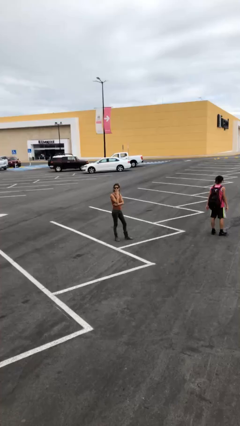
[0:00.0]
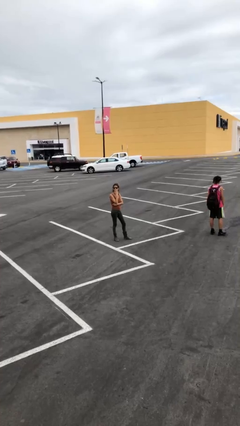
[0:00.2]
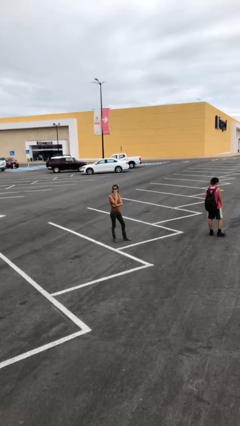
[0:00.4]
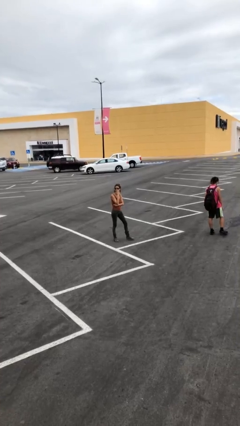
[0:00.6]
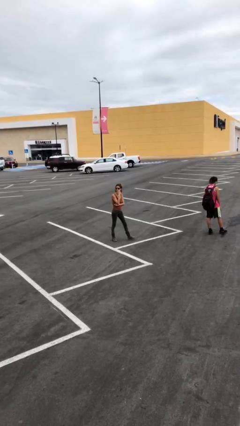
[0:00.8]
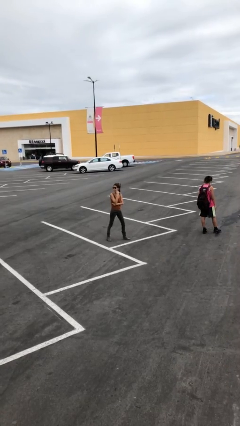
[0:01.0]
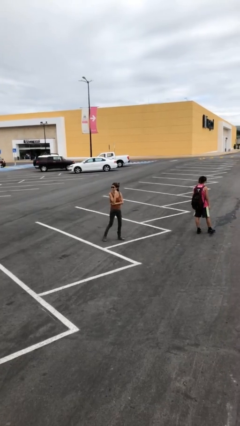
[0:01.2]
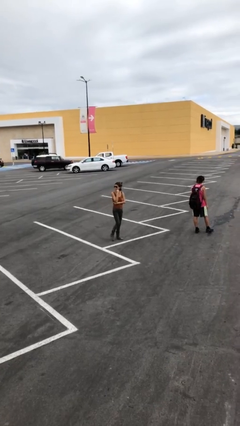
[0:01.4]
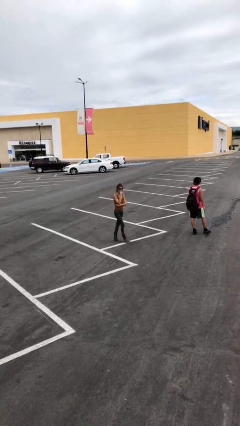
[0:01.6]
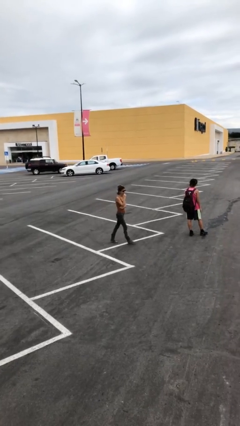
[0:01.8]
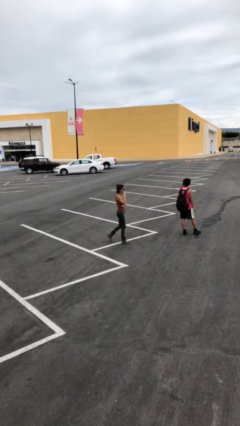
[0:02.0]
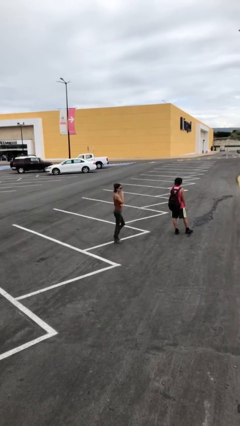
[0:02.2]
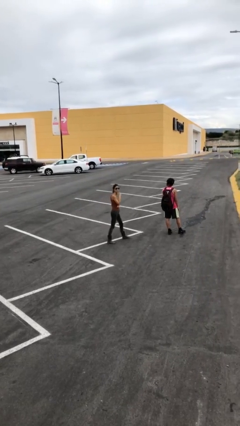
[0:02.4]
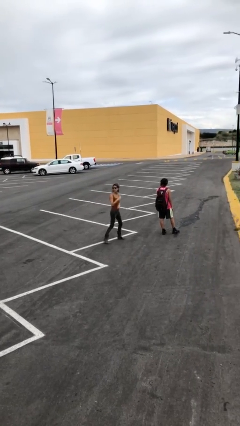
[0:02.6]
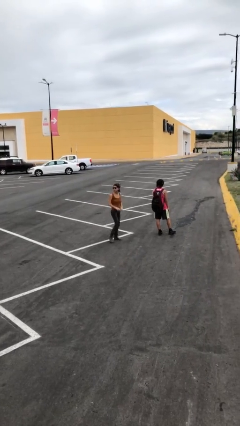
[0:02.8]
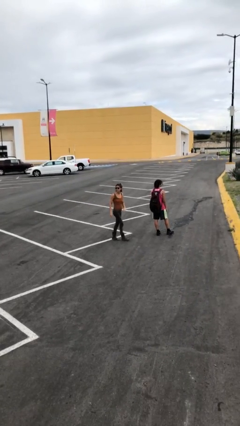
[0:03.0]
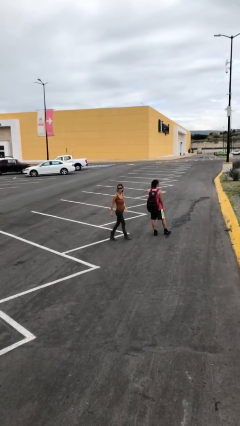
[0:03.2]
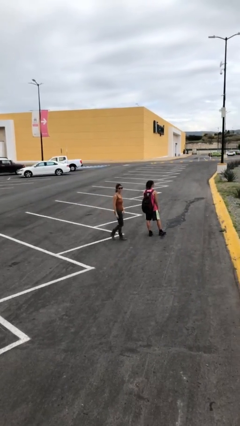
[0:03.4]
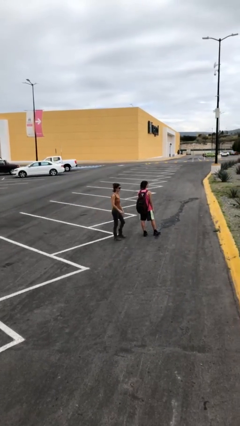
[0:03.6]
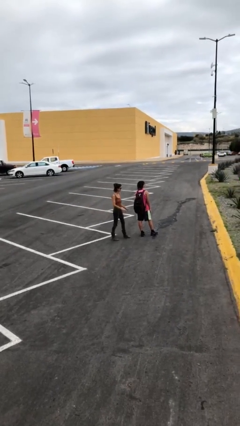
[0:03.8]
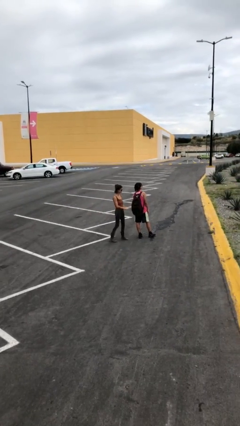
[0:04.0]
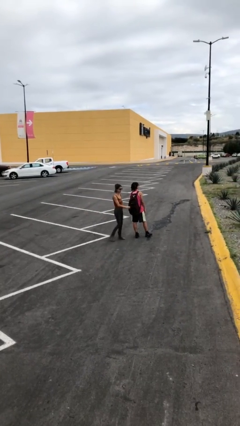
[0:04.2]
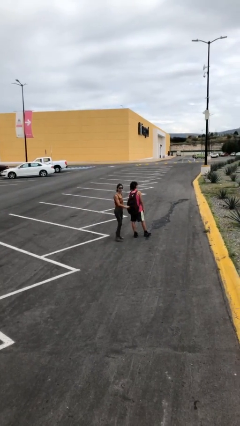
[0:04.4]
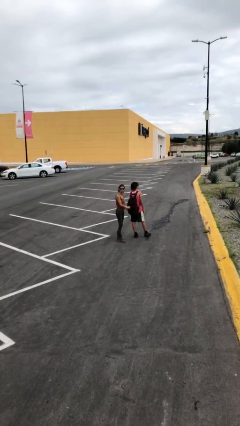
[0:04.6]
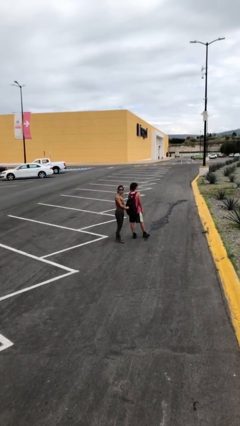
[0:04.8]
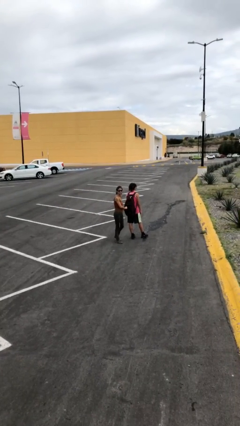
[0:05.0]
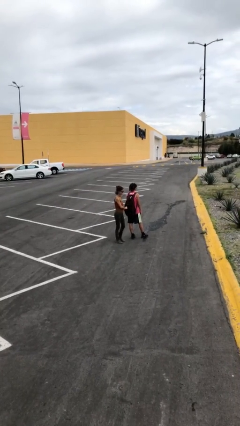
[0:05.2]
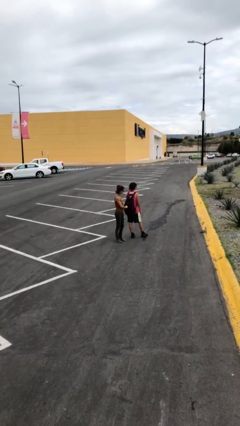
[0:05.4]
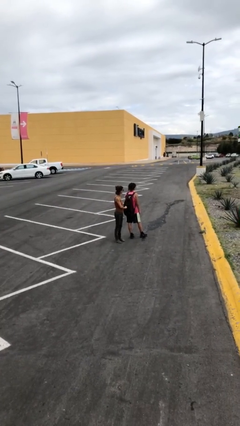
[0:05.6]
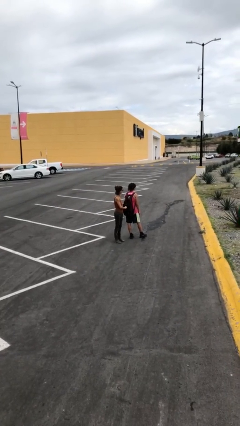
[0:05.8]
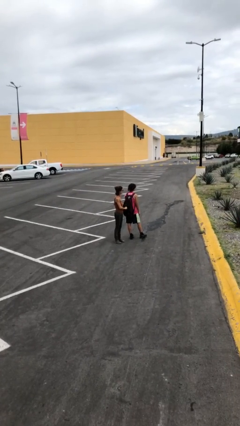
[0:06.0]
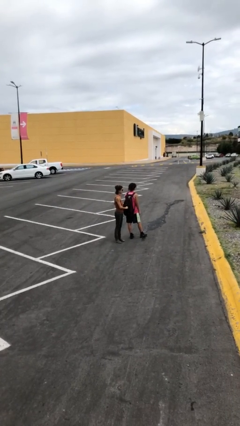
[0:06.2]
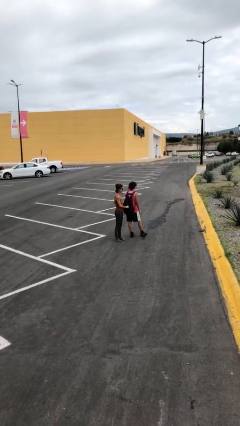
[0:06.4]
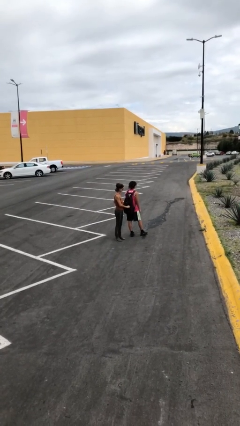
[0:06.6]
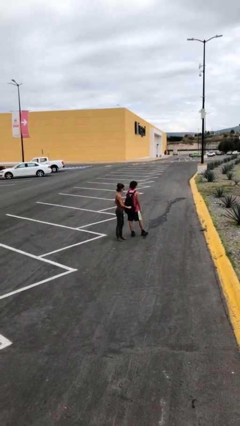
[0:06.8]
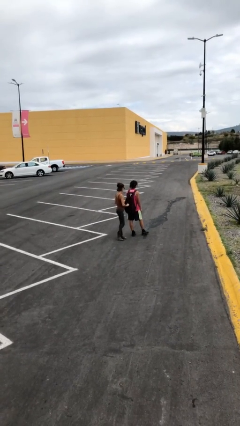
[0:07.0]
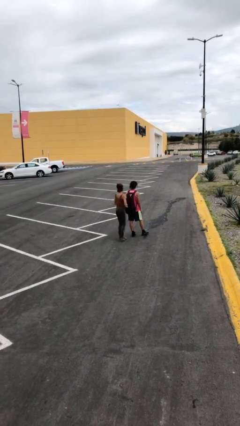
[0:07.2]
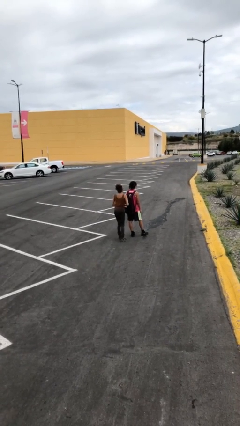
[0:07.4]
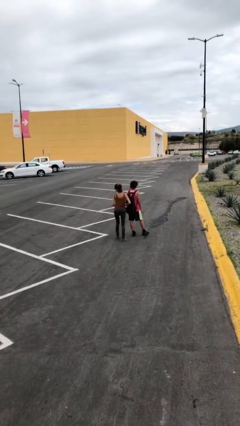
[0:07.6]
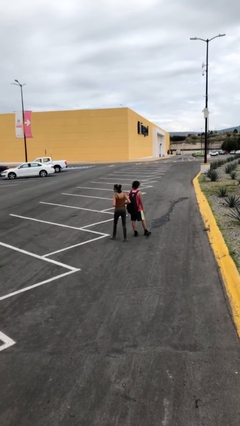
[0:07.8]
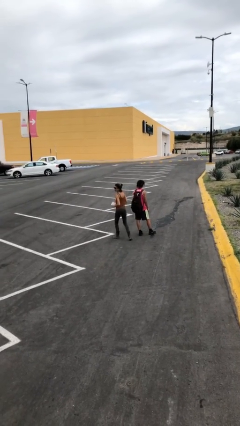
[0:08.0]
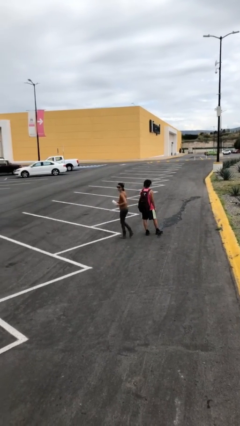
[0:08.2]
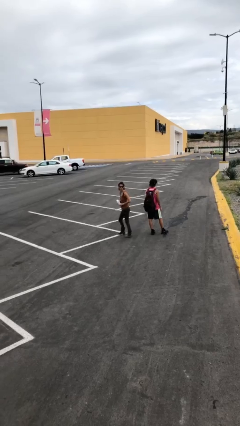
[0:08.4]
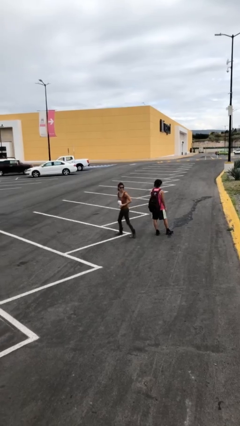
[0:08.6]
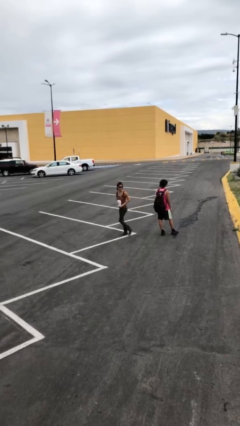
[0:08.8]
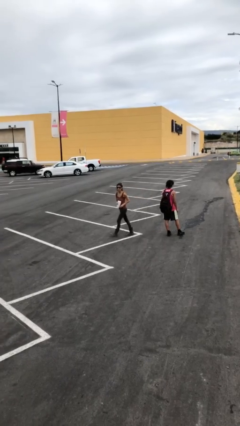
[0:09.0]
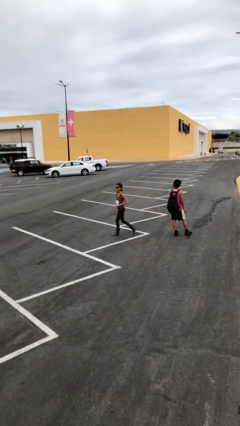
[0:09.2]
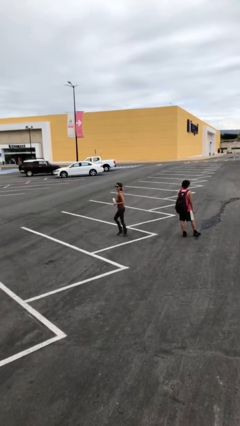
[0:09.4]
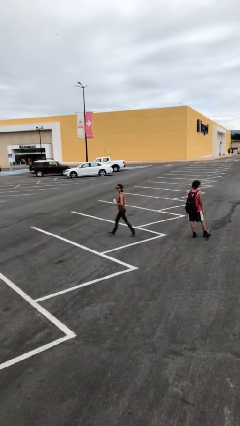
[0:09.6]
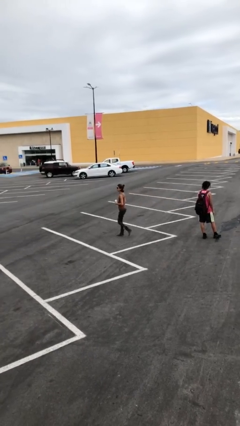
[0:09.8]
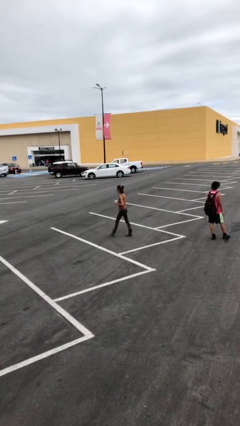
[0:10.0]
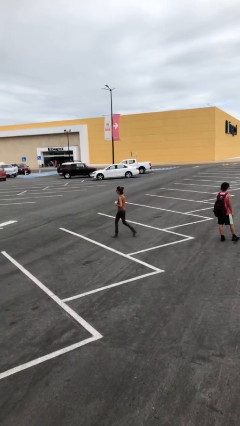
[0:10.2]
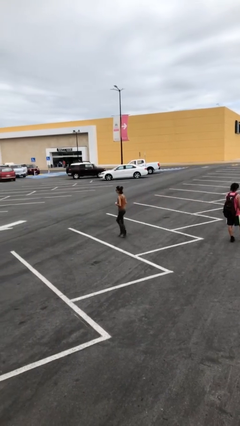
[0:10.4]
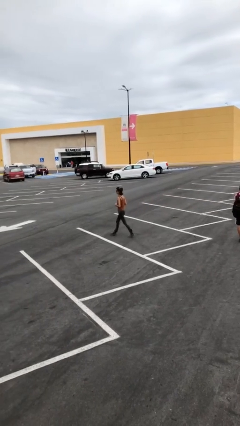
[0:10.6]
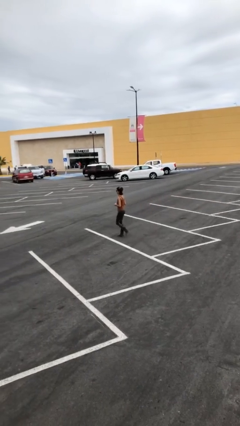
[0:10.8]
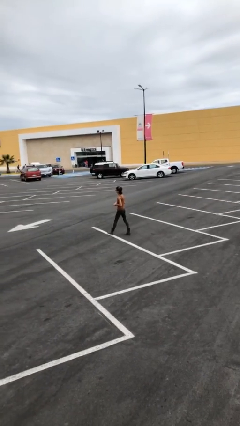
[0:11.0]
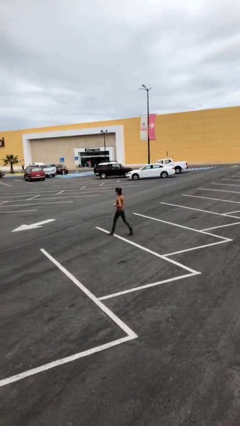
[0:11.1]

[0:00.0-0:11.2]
person steals object from person

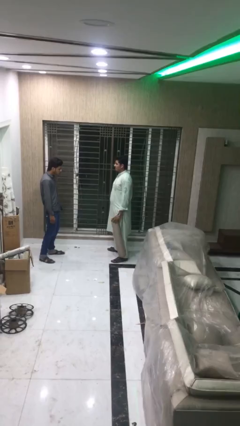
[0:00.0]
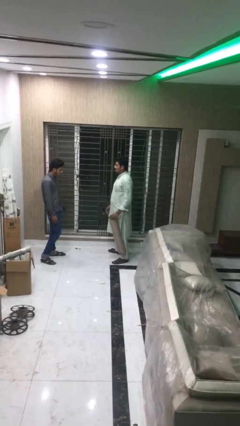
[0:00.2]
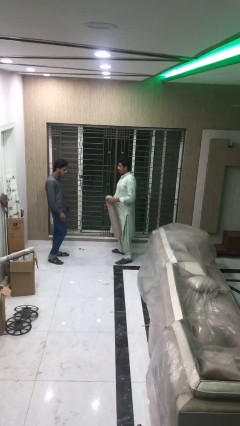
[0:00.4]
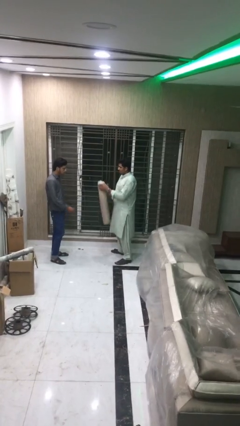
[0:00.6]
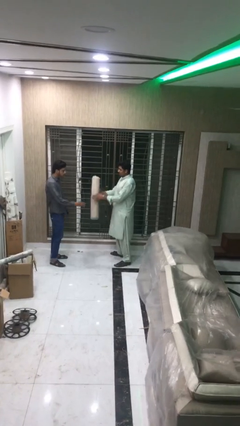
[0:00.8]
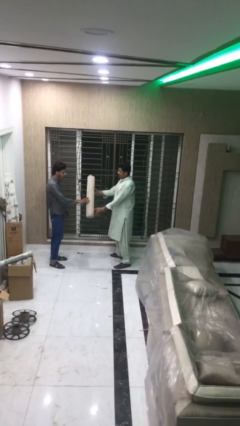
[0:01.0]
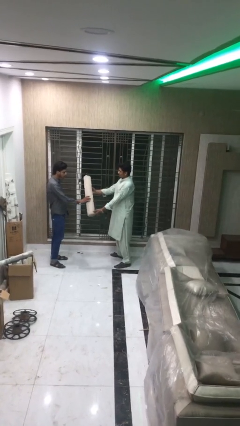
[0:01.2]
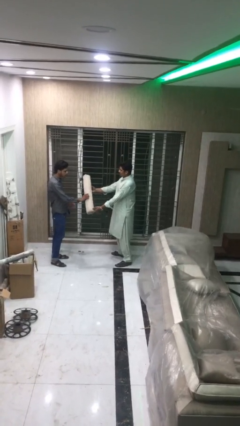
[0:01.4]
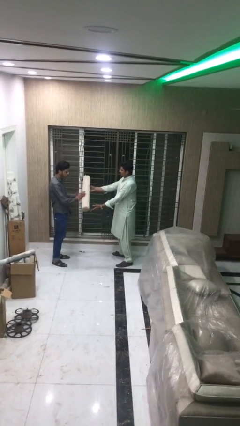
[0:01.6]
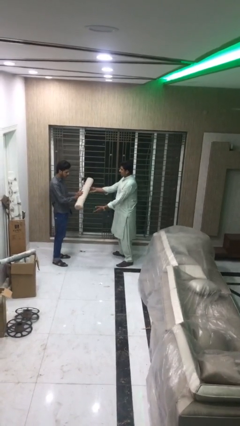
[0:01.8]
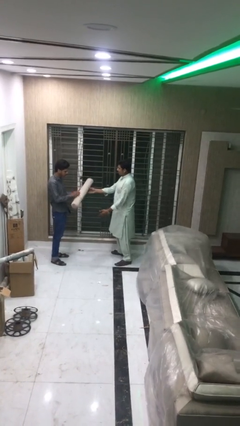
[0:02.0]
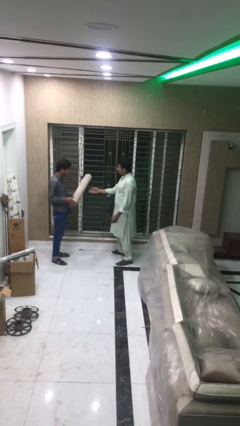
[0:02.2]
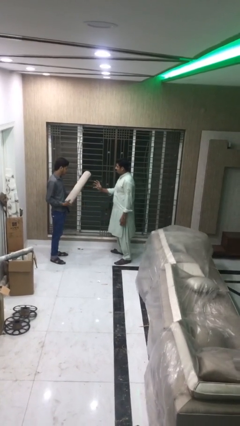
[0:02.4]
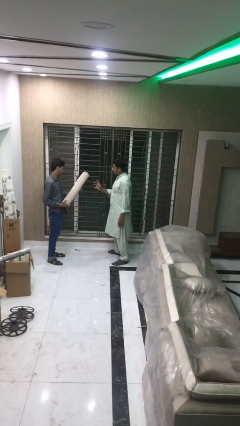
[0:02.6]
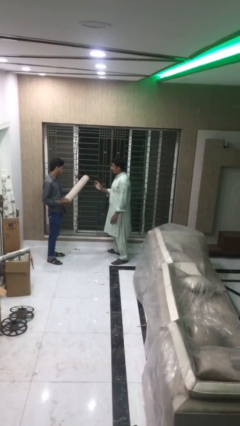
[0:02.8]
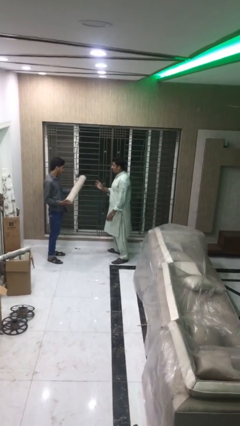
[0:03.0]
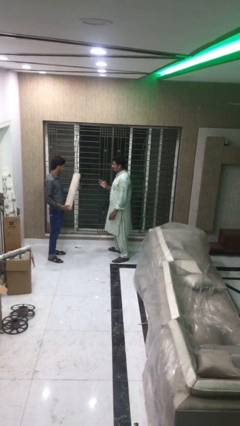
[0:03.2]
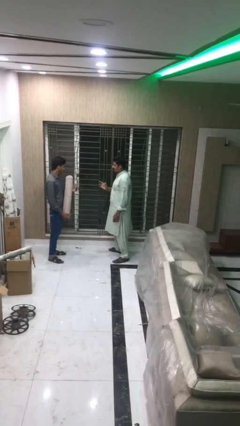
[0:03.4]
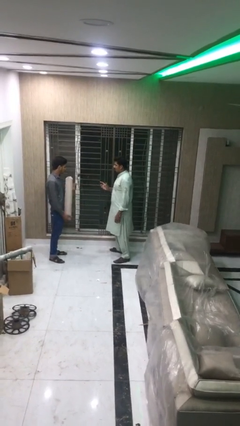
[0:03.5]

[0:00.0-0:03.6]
person transfers object to person

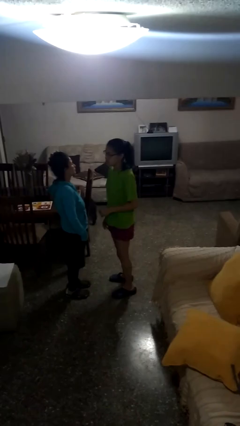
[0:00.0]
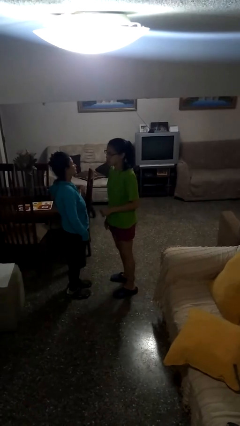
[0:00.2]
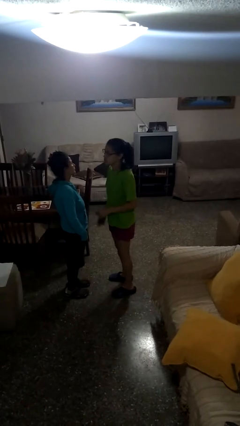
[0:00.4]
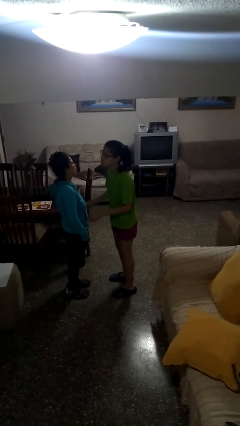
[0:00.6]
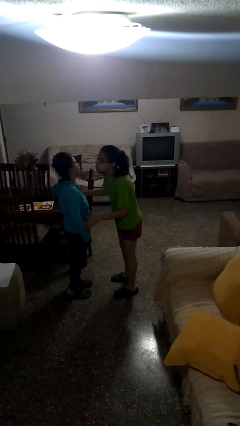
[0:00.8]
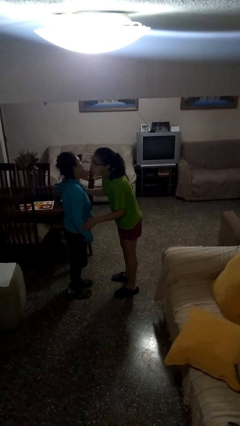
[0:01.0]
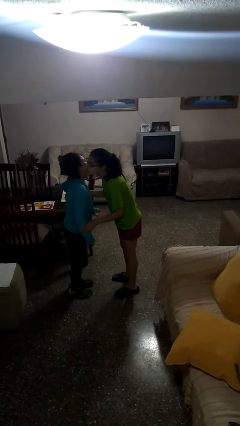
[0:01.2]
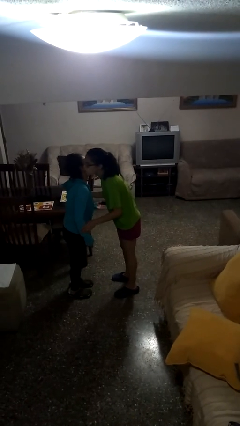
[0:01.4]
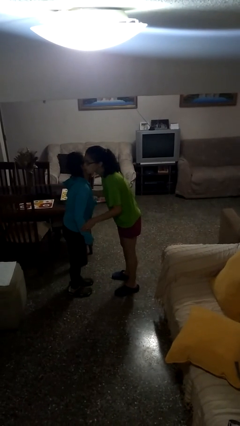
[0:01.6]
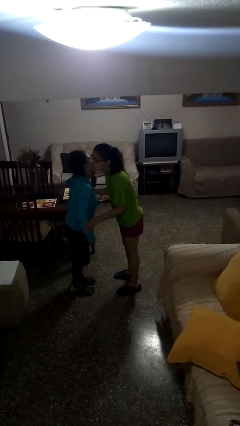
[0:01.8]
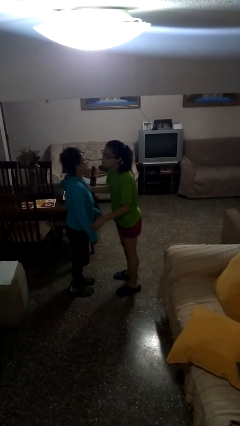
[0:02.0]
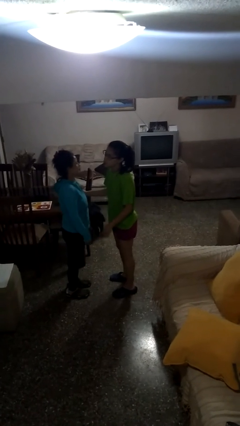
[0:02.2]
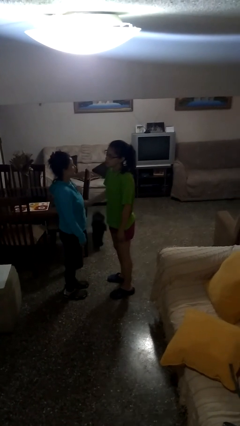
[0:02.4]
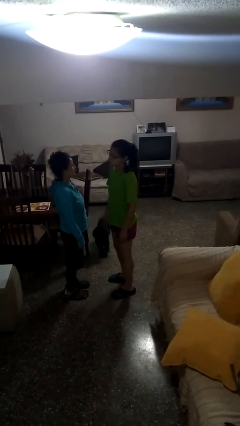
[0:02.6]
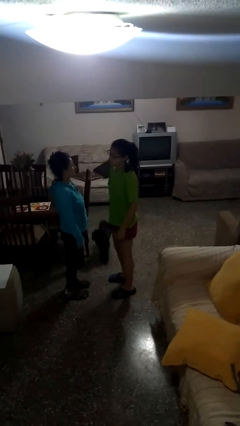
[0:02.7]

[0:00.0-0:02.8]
person kisses cheek of person

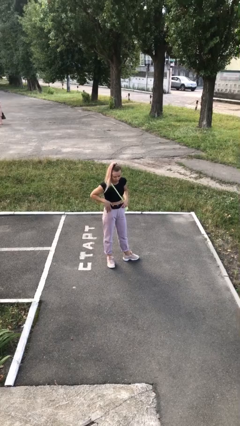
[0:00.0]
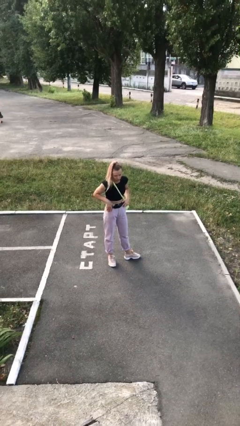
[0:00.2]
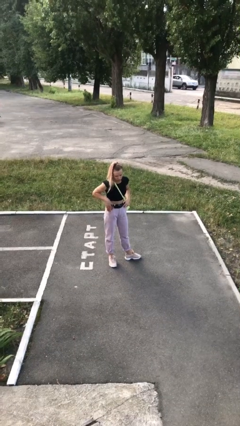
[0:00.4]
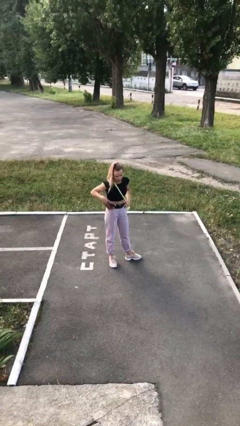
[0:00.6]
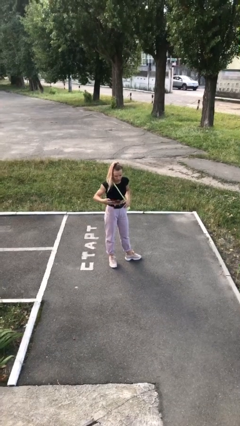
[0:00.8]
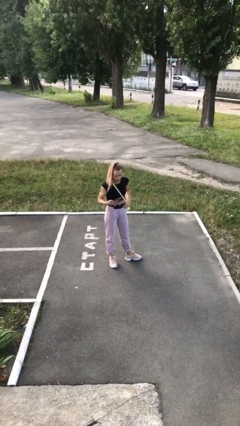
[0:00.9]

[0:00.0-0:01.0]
person takes phone from pocket
